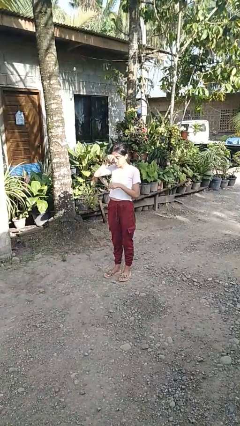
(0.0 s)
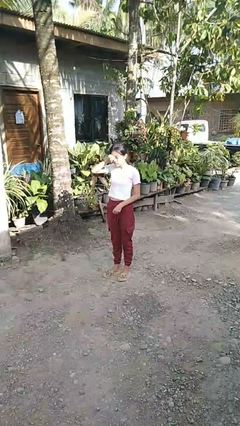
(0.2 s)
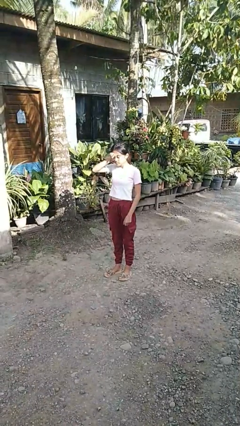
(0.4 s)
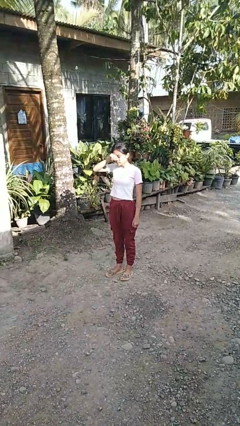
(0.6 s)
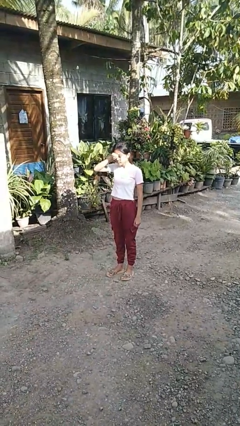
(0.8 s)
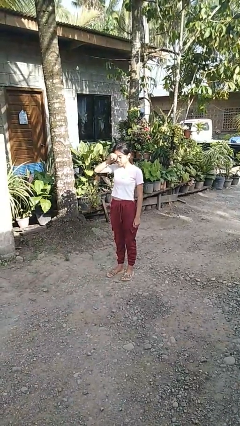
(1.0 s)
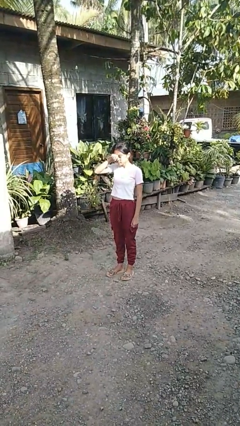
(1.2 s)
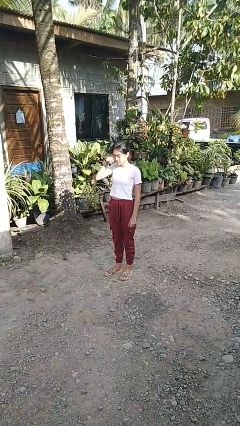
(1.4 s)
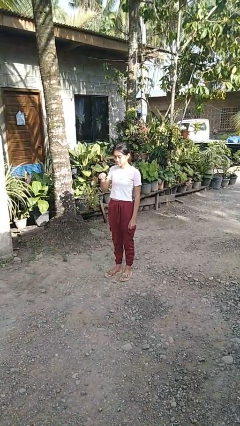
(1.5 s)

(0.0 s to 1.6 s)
person rubs eyes

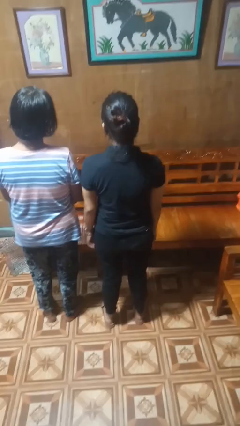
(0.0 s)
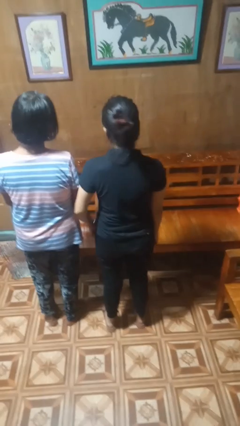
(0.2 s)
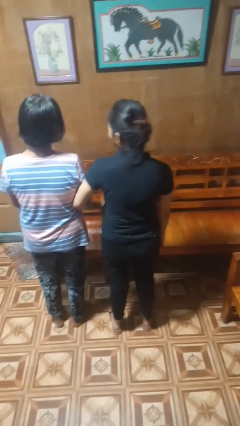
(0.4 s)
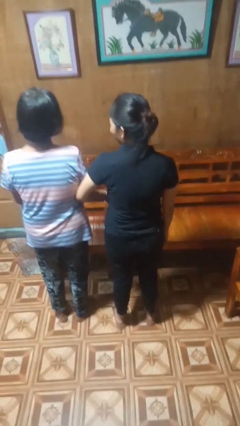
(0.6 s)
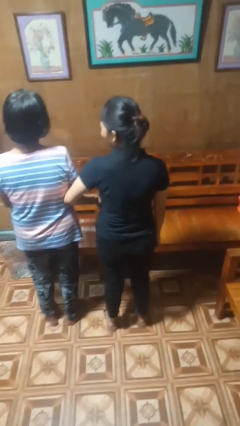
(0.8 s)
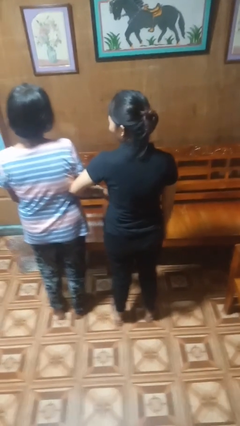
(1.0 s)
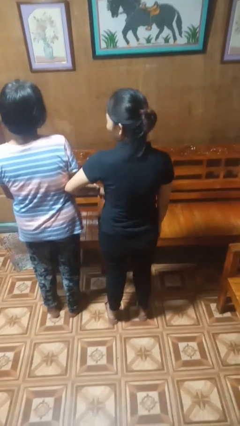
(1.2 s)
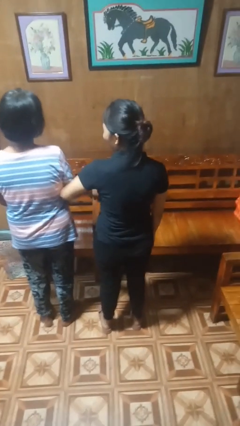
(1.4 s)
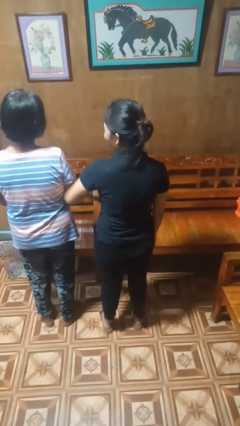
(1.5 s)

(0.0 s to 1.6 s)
person nudges person with elbow

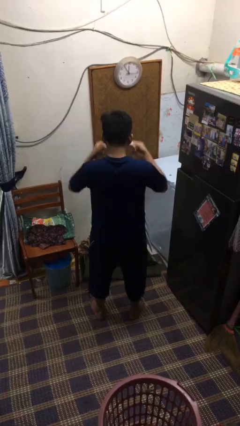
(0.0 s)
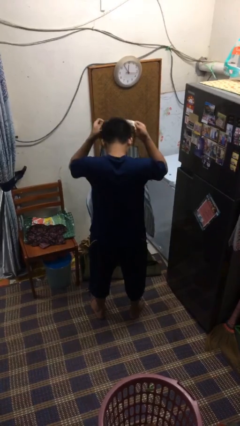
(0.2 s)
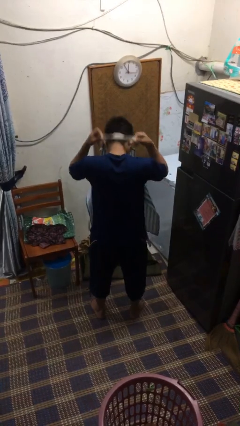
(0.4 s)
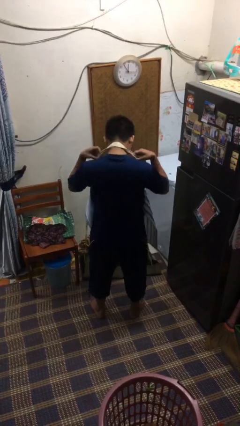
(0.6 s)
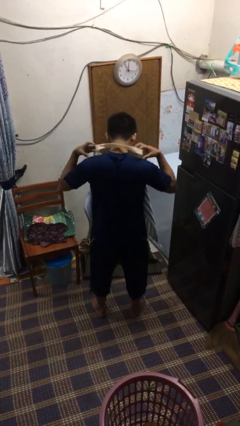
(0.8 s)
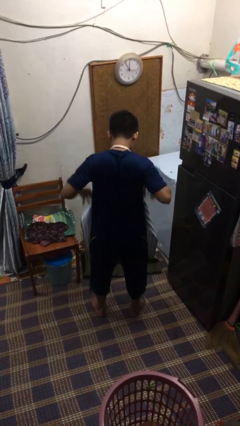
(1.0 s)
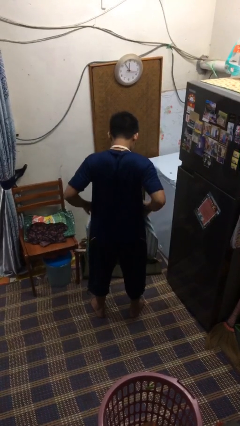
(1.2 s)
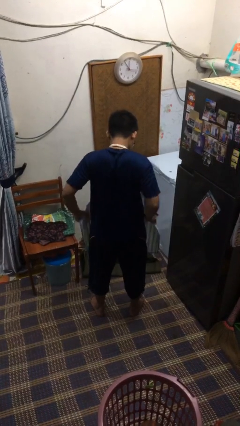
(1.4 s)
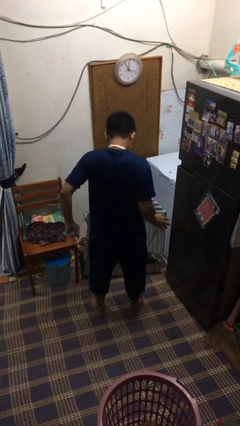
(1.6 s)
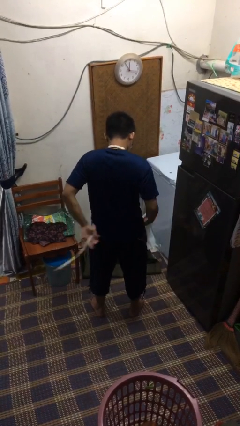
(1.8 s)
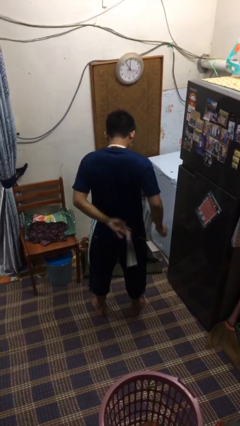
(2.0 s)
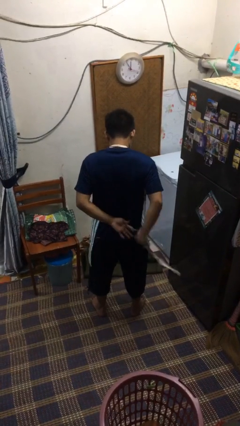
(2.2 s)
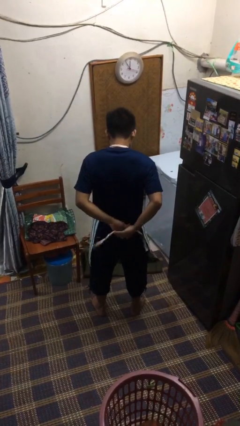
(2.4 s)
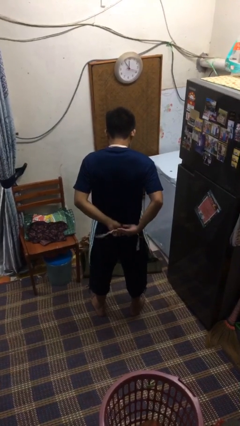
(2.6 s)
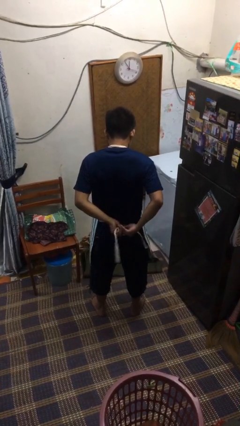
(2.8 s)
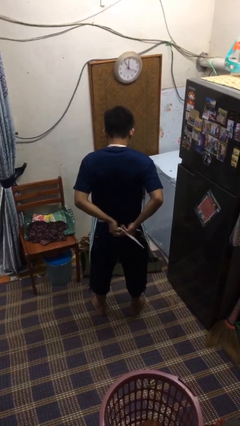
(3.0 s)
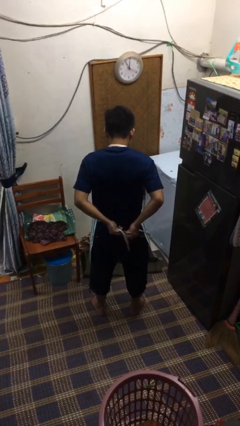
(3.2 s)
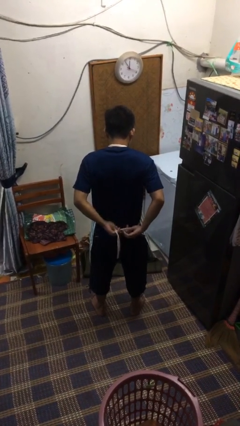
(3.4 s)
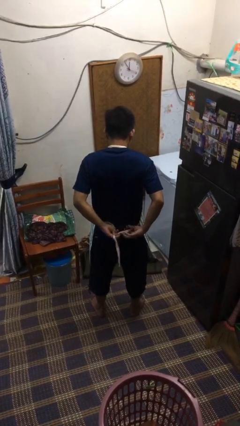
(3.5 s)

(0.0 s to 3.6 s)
person puts on apron

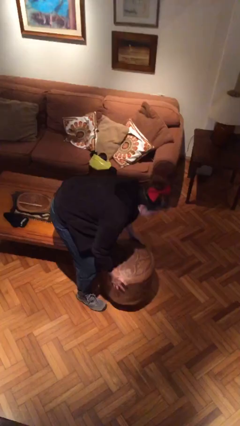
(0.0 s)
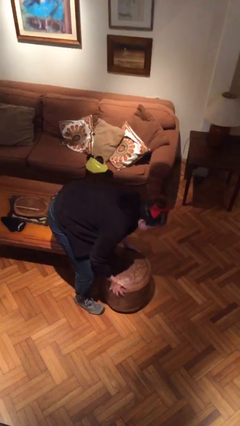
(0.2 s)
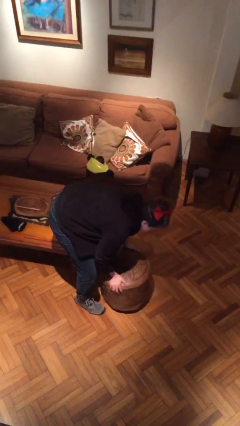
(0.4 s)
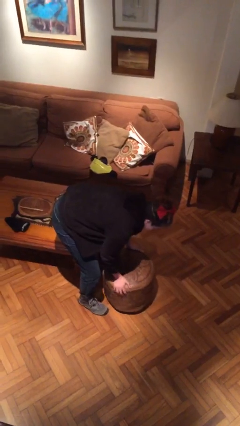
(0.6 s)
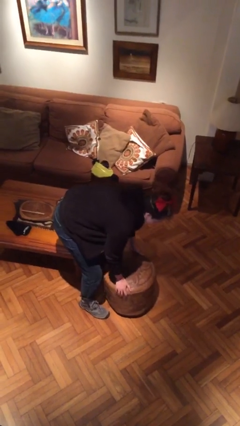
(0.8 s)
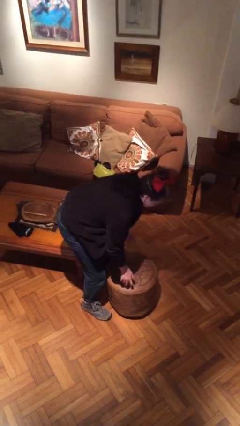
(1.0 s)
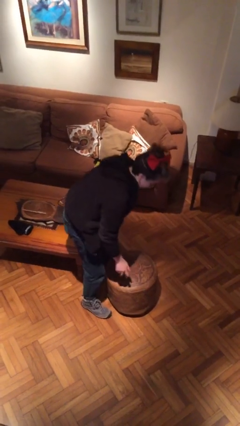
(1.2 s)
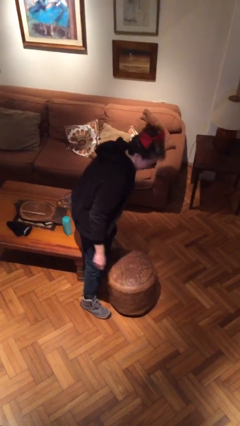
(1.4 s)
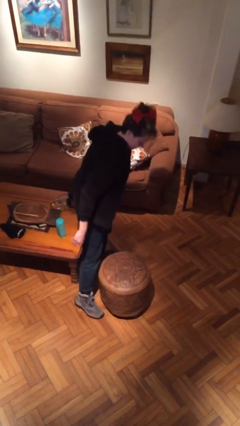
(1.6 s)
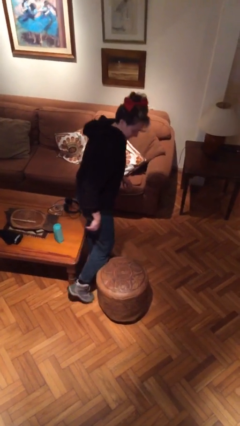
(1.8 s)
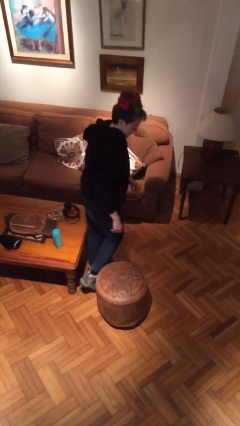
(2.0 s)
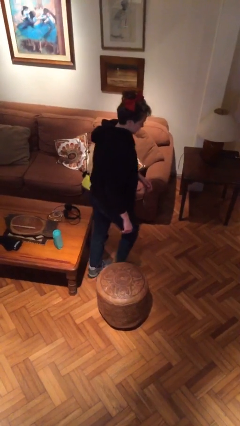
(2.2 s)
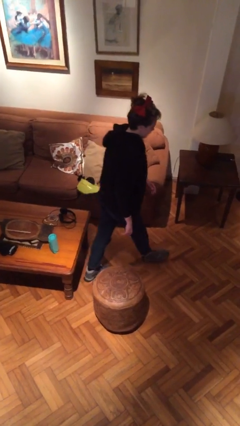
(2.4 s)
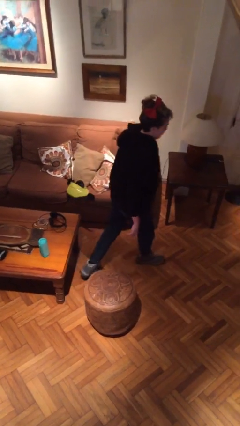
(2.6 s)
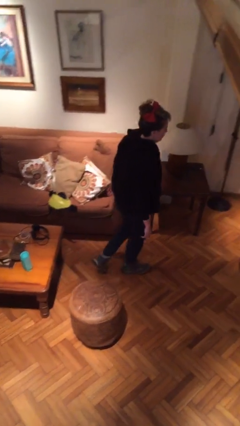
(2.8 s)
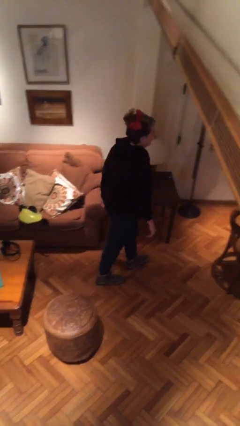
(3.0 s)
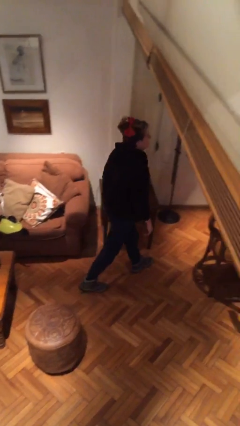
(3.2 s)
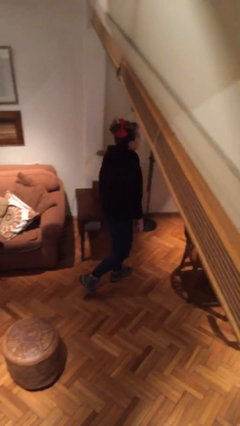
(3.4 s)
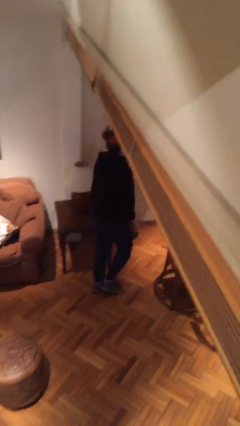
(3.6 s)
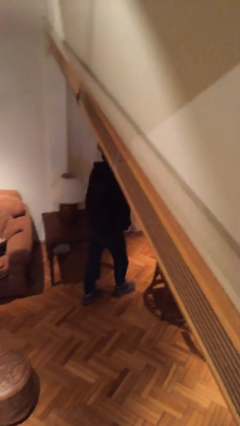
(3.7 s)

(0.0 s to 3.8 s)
person puts down object on floor

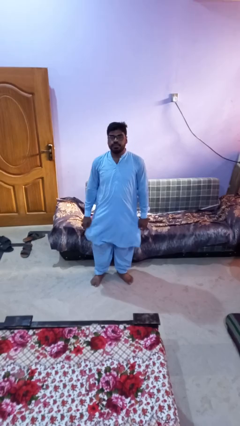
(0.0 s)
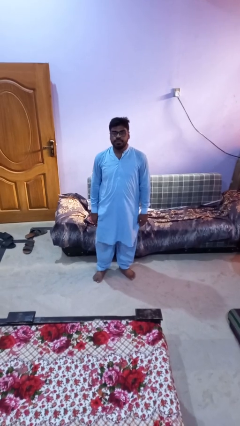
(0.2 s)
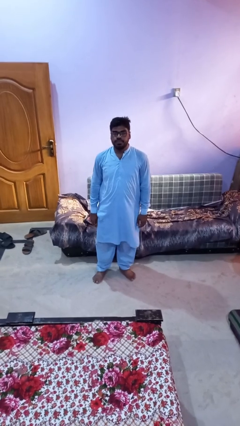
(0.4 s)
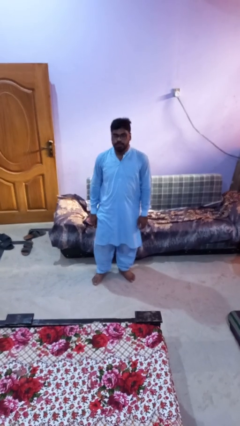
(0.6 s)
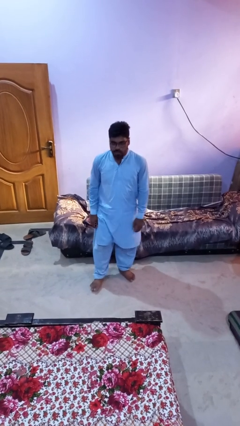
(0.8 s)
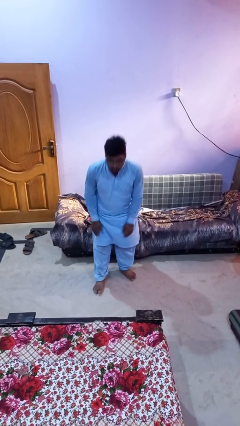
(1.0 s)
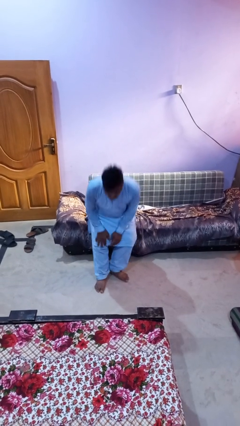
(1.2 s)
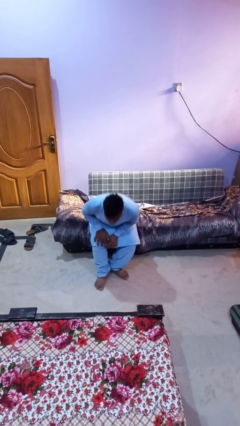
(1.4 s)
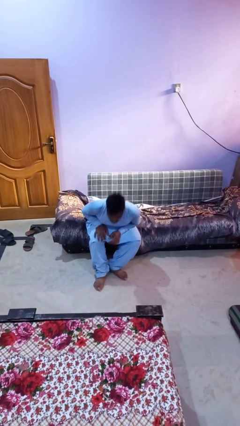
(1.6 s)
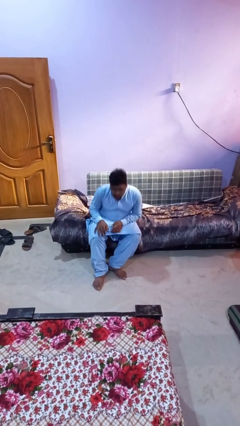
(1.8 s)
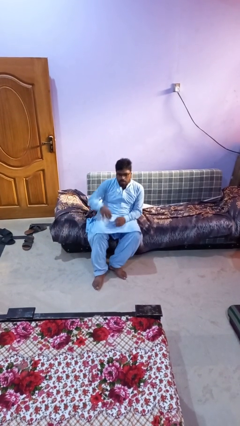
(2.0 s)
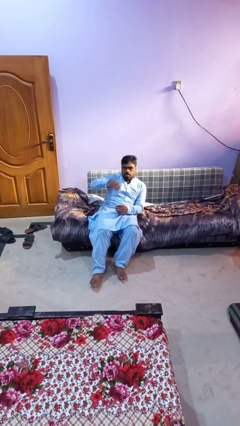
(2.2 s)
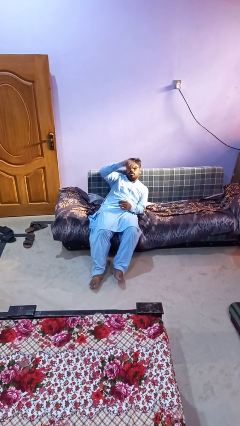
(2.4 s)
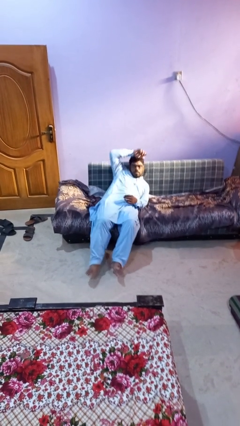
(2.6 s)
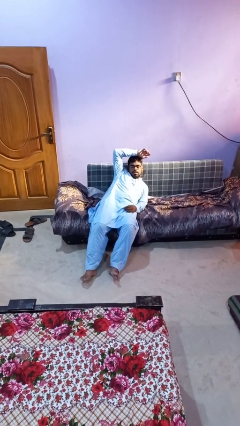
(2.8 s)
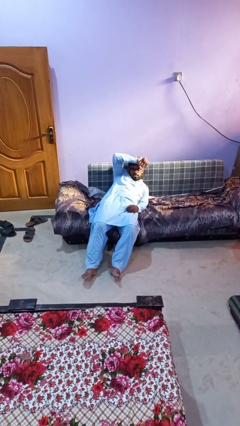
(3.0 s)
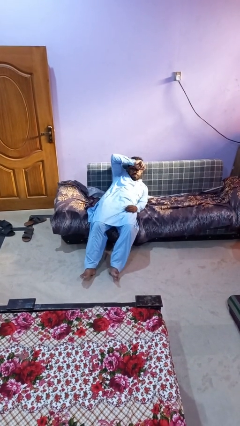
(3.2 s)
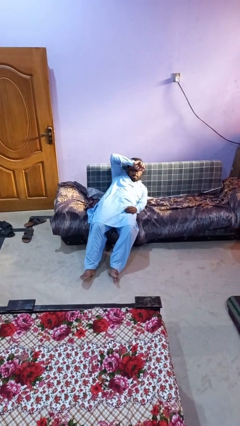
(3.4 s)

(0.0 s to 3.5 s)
person lies down on couch

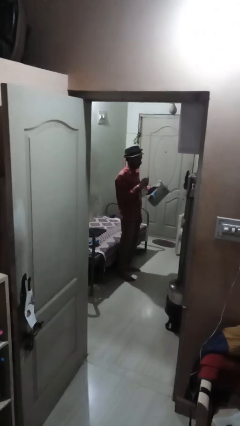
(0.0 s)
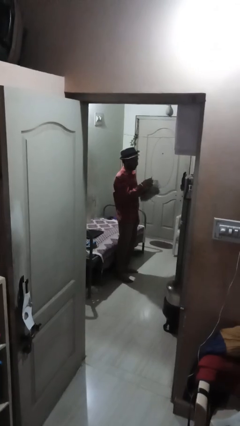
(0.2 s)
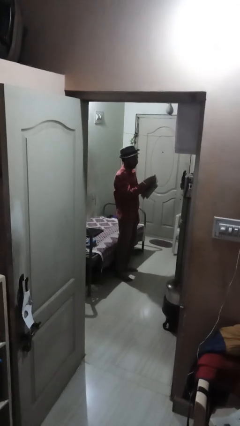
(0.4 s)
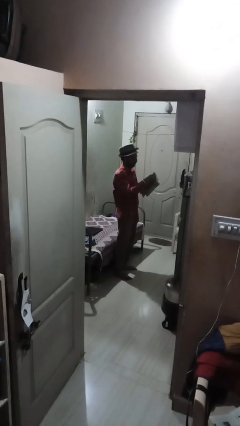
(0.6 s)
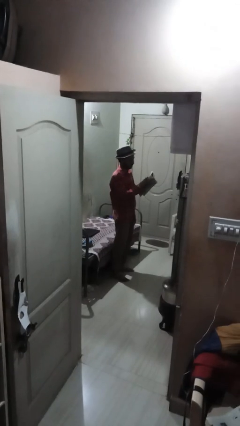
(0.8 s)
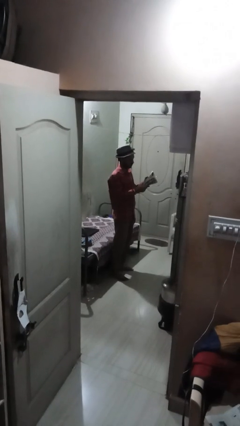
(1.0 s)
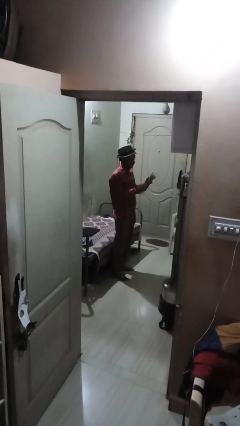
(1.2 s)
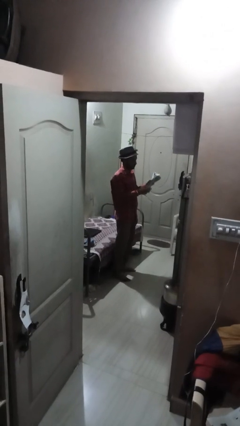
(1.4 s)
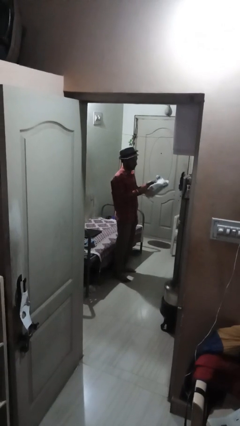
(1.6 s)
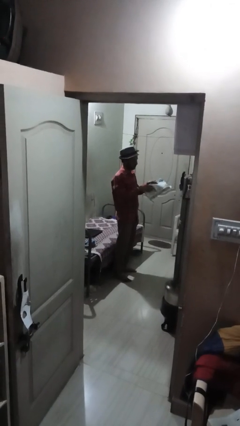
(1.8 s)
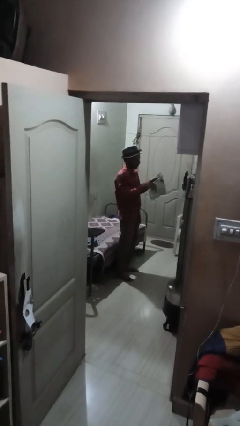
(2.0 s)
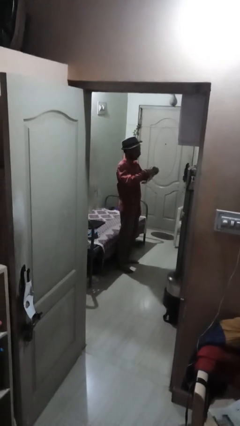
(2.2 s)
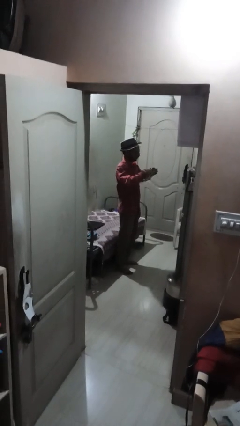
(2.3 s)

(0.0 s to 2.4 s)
person tears paper

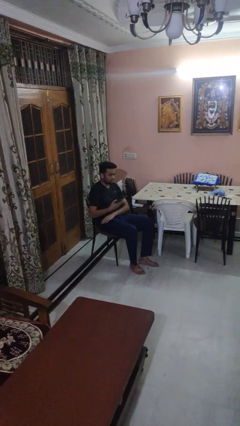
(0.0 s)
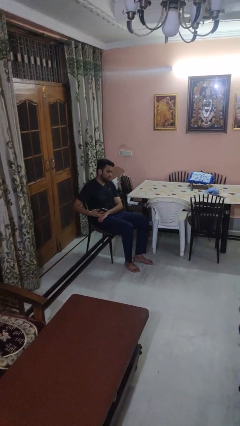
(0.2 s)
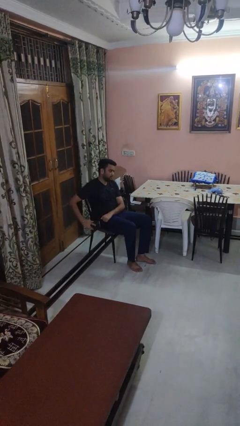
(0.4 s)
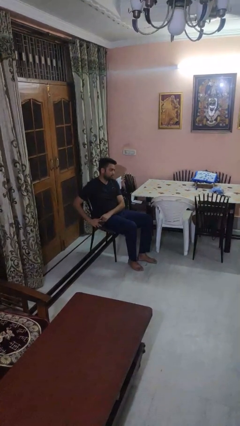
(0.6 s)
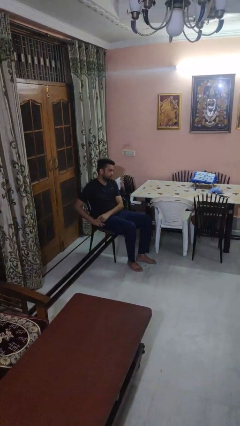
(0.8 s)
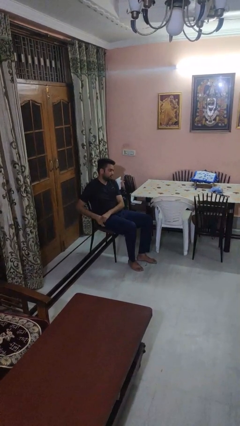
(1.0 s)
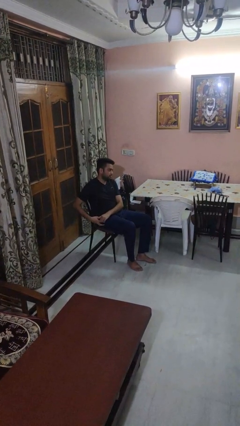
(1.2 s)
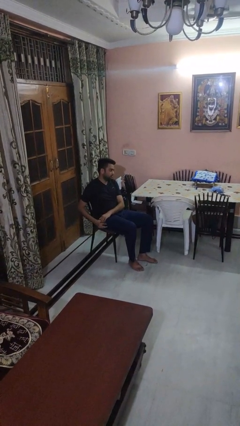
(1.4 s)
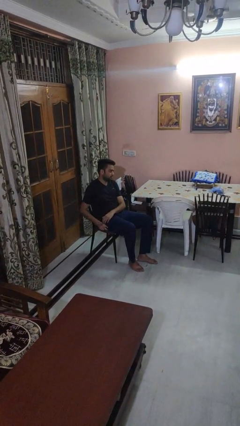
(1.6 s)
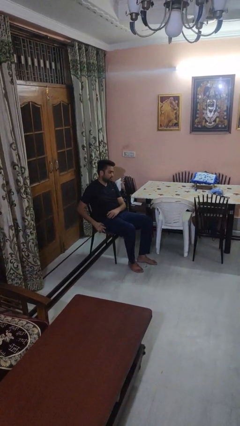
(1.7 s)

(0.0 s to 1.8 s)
person puts phone into pocket
